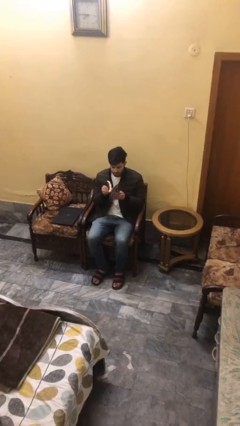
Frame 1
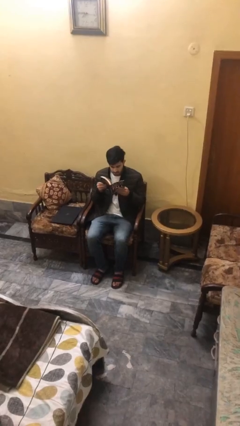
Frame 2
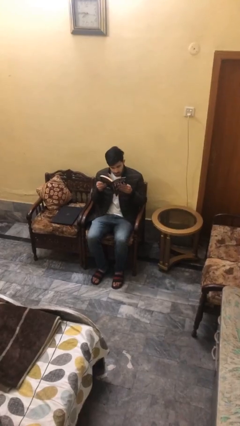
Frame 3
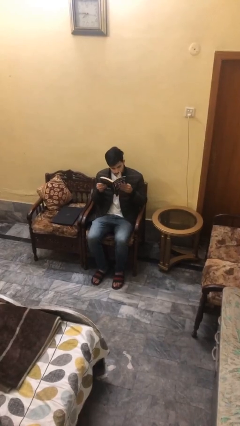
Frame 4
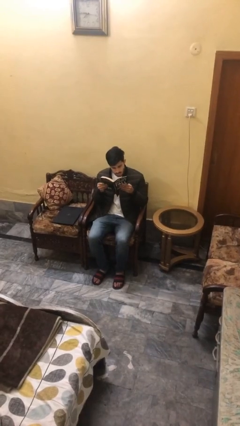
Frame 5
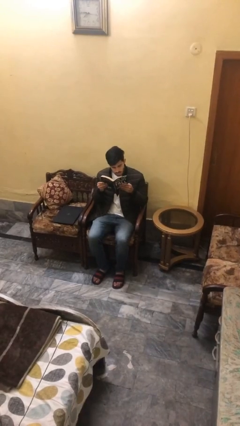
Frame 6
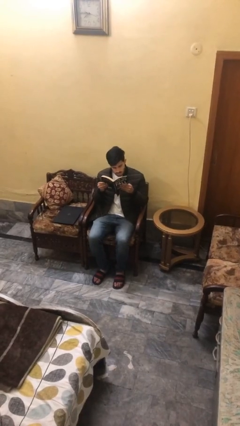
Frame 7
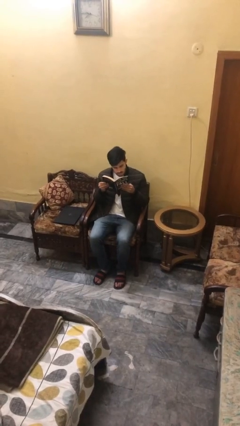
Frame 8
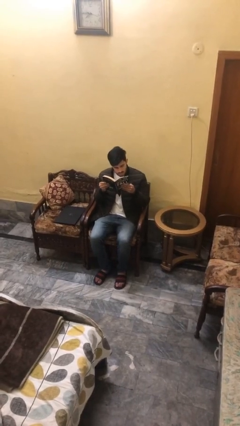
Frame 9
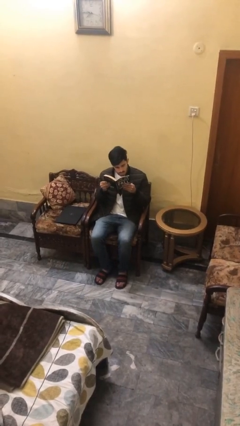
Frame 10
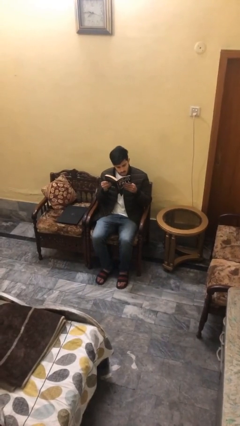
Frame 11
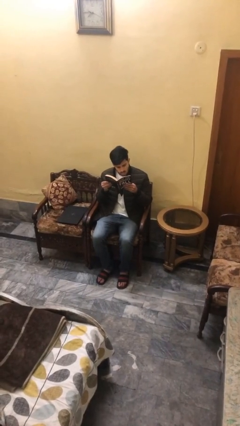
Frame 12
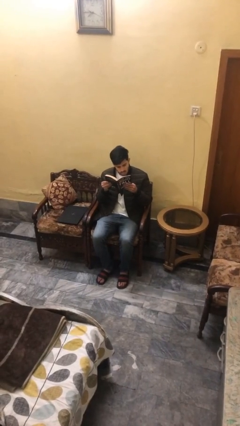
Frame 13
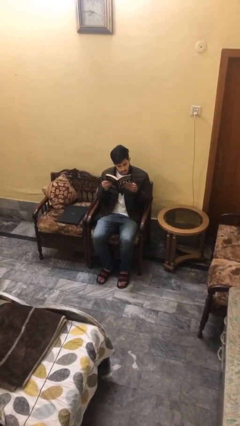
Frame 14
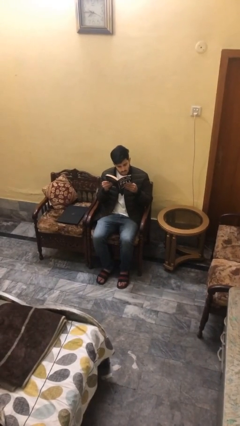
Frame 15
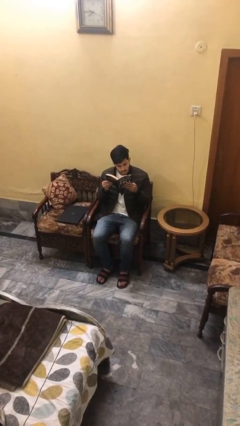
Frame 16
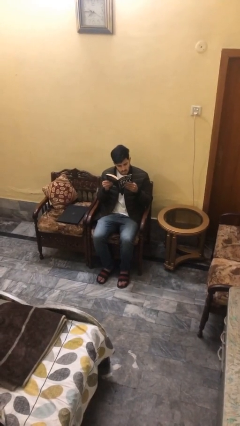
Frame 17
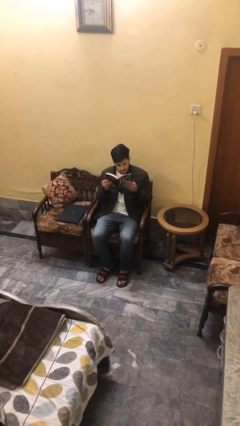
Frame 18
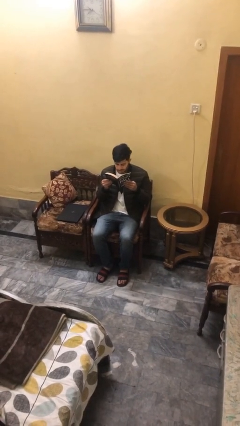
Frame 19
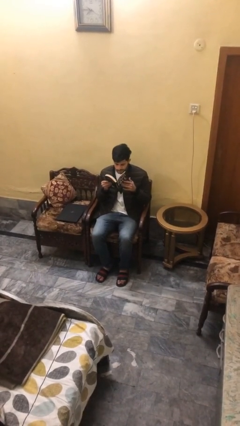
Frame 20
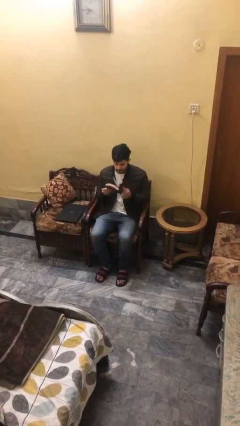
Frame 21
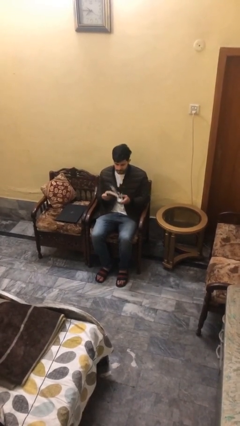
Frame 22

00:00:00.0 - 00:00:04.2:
person reads document

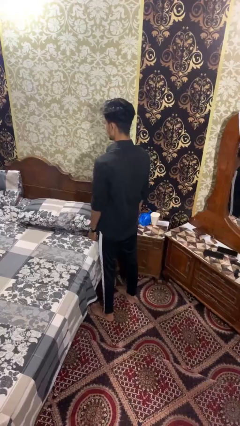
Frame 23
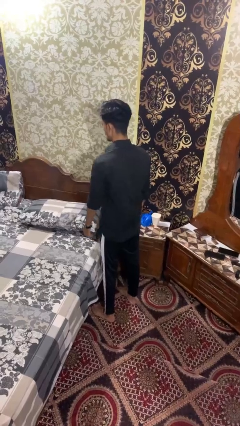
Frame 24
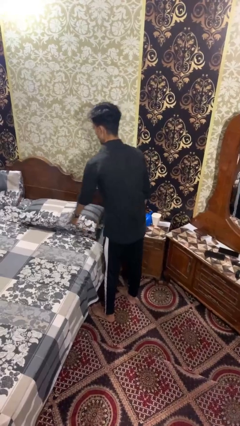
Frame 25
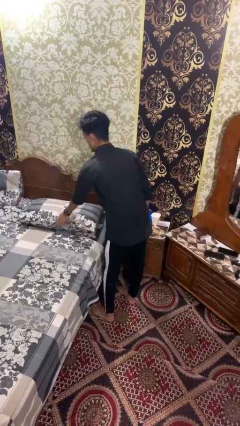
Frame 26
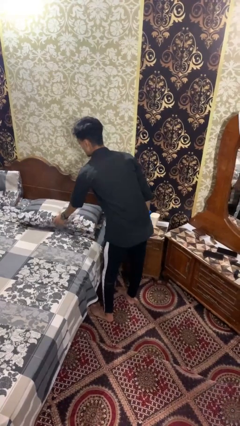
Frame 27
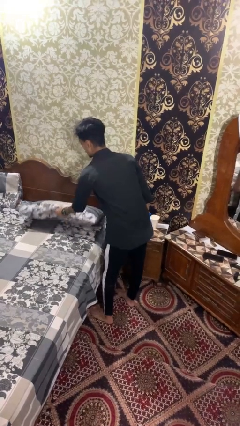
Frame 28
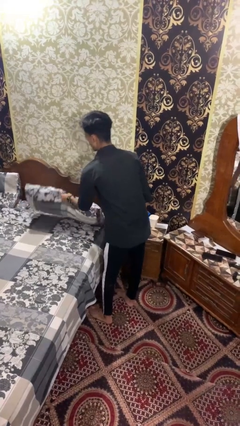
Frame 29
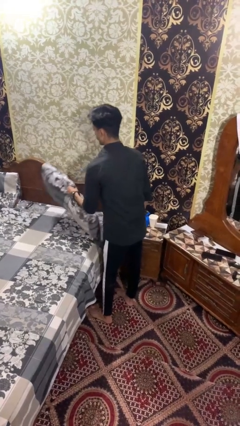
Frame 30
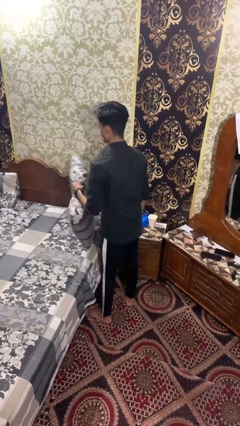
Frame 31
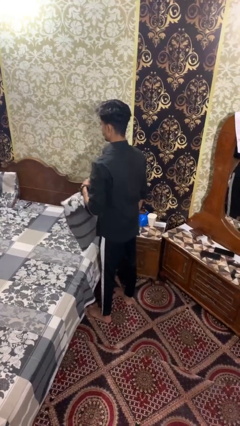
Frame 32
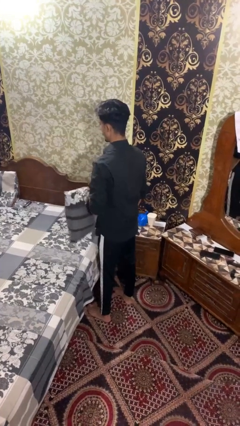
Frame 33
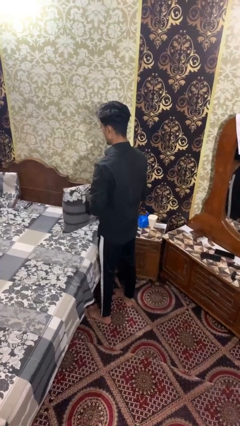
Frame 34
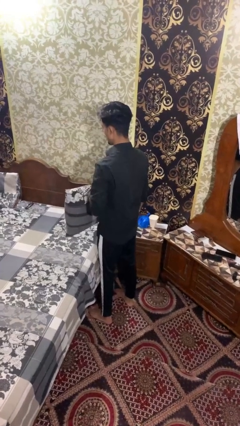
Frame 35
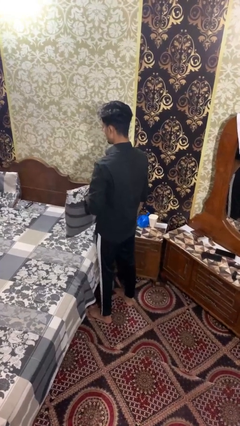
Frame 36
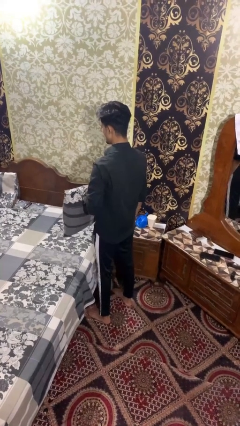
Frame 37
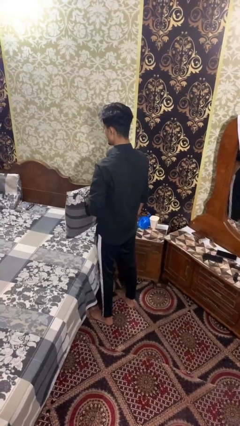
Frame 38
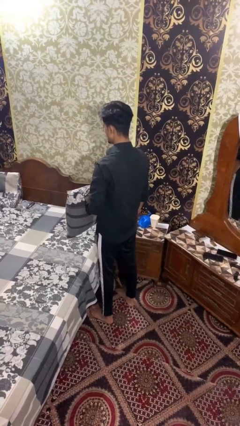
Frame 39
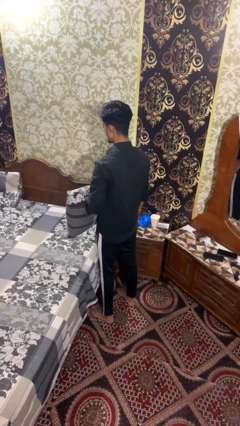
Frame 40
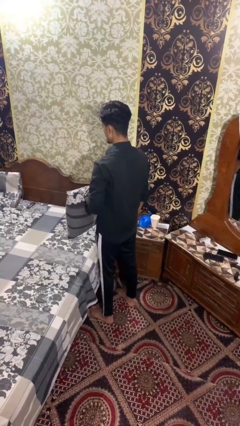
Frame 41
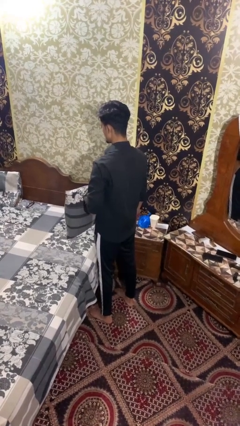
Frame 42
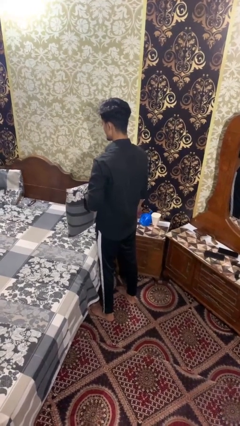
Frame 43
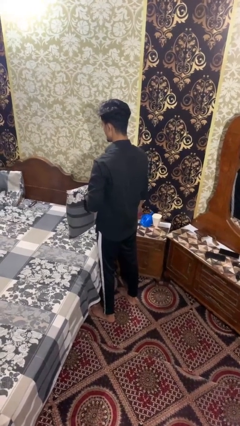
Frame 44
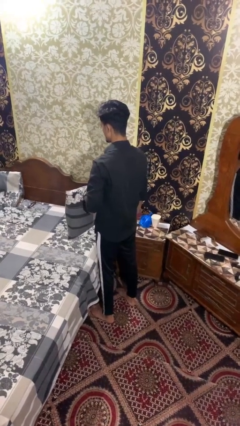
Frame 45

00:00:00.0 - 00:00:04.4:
person picks up object from bed

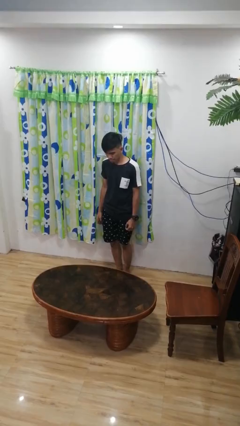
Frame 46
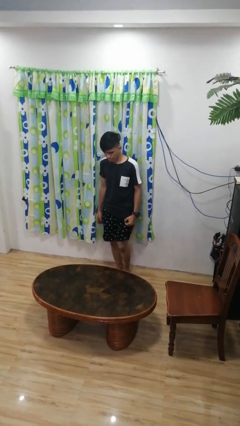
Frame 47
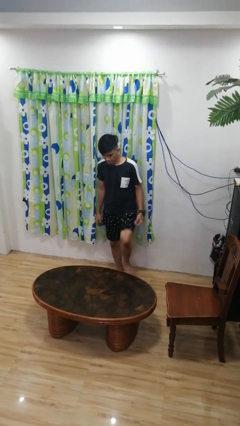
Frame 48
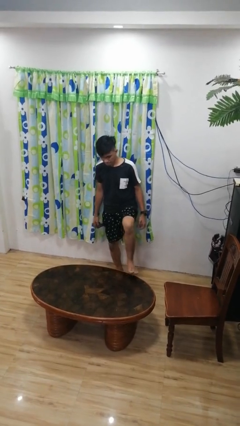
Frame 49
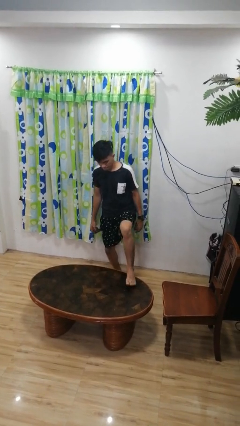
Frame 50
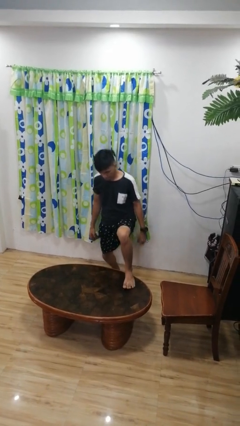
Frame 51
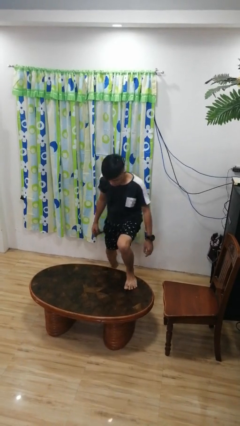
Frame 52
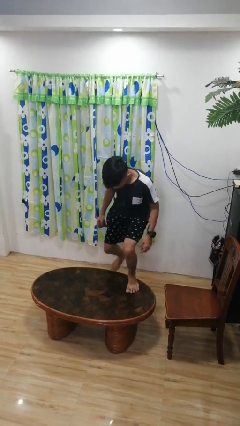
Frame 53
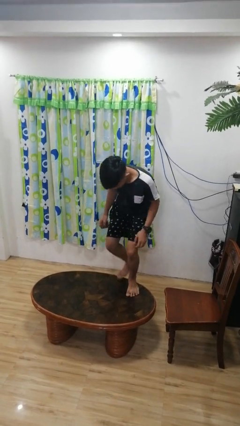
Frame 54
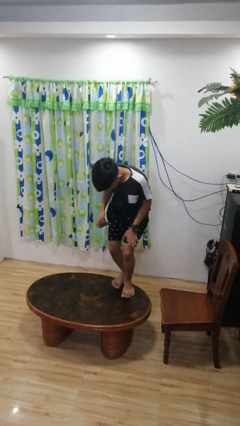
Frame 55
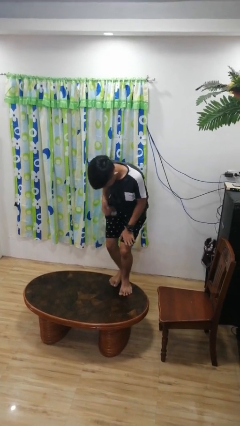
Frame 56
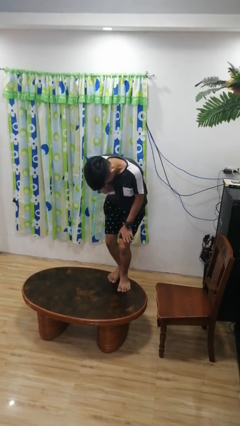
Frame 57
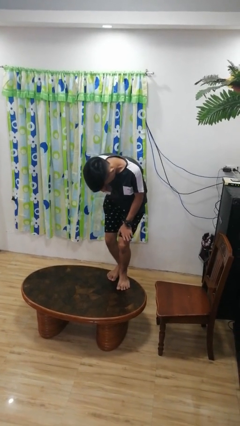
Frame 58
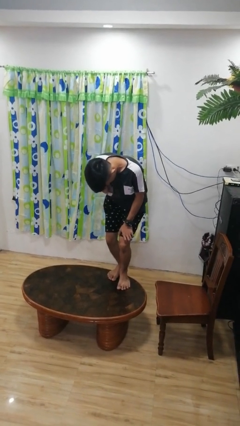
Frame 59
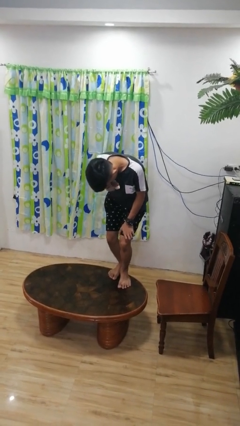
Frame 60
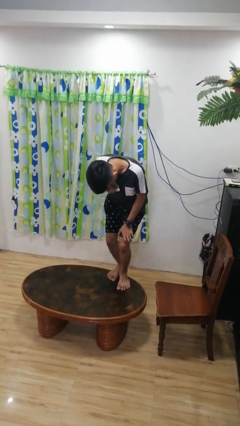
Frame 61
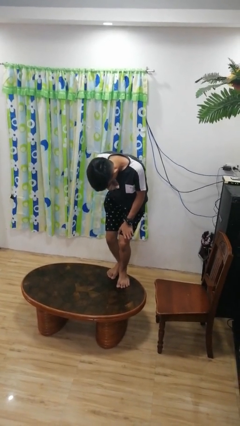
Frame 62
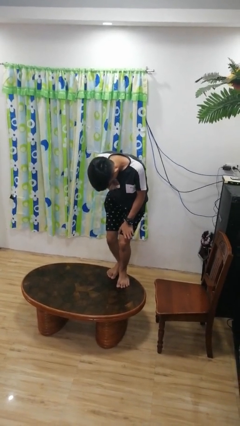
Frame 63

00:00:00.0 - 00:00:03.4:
person climbs on table

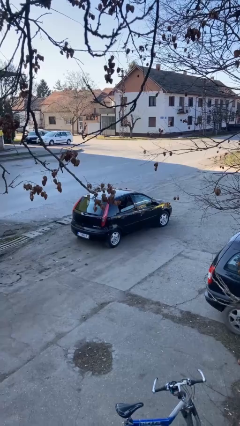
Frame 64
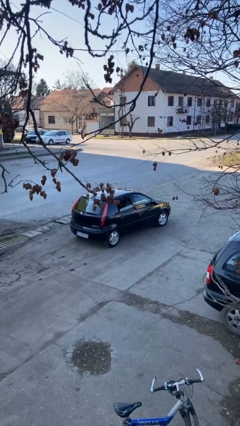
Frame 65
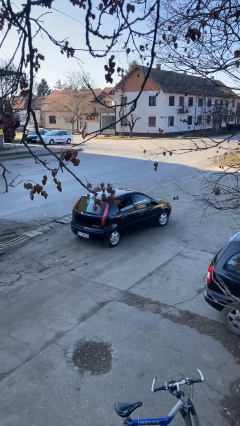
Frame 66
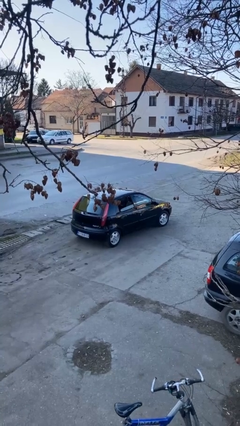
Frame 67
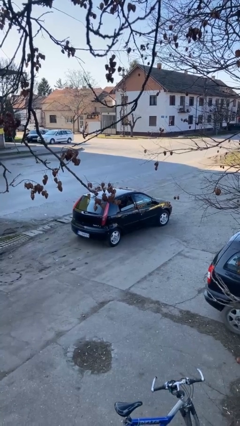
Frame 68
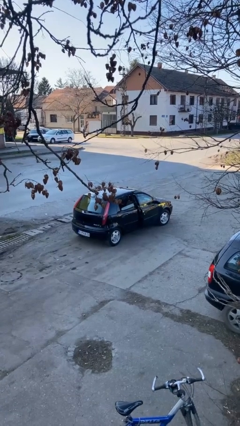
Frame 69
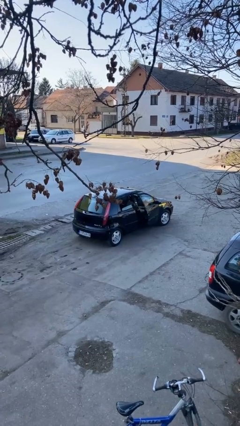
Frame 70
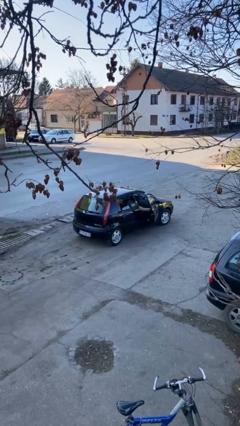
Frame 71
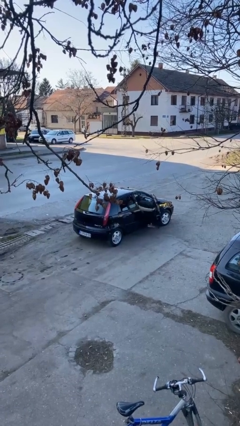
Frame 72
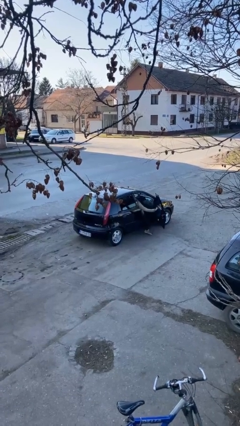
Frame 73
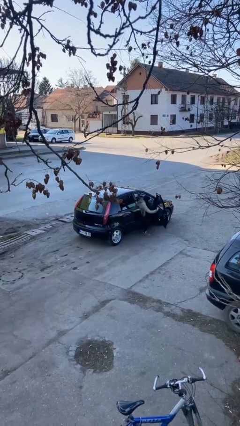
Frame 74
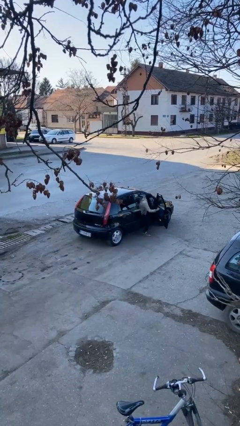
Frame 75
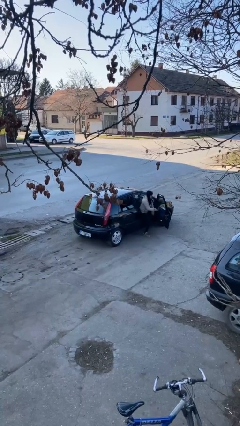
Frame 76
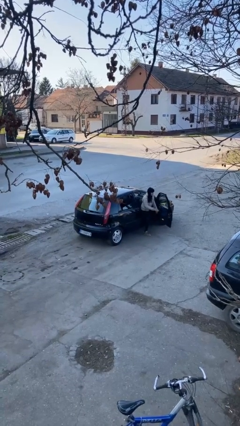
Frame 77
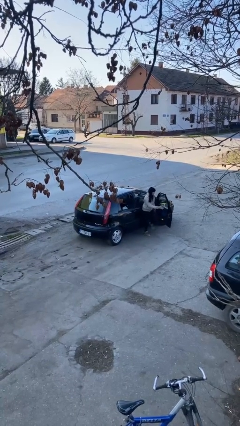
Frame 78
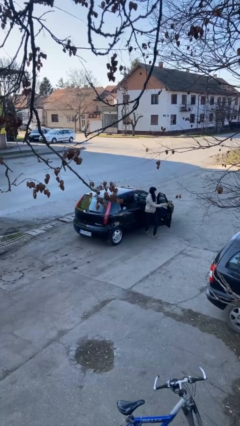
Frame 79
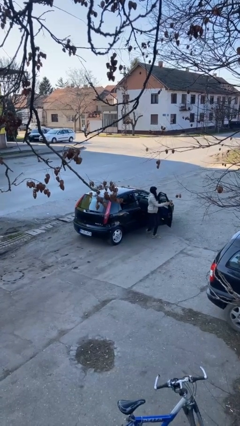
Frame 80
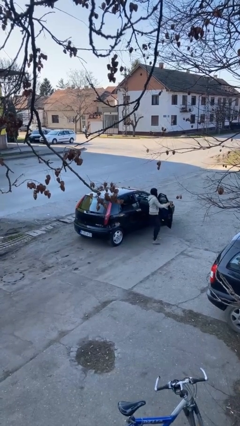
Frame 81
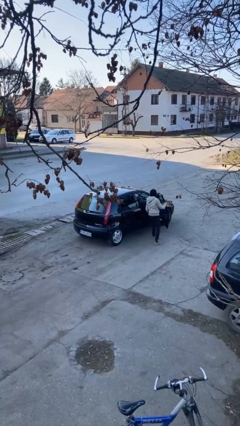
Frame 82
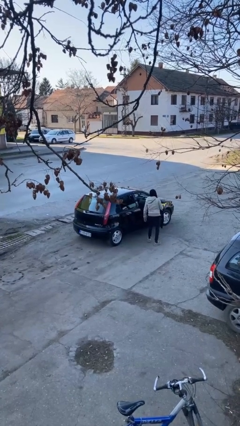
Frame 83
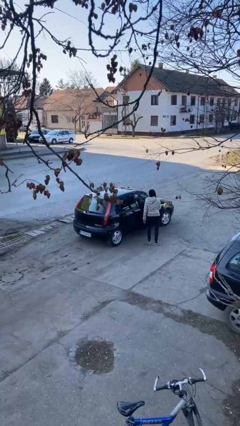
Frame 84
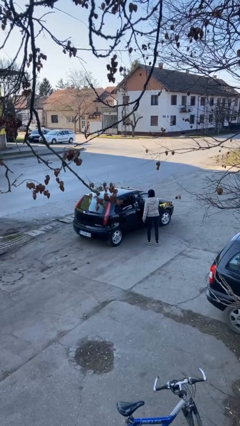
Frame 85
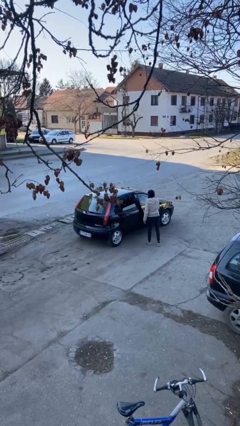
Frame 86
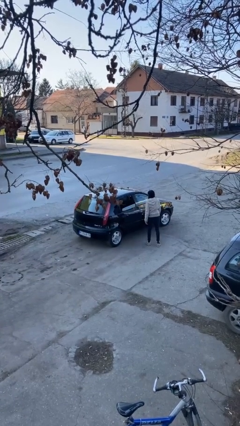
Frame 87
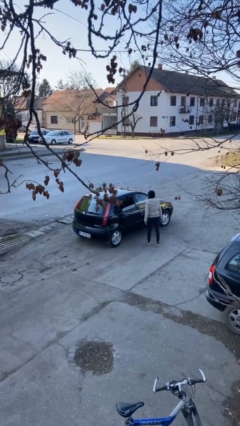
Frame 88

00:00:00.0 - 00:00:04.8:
car drops off person

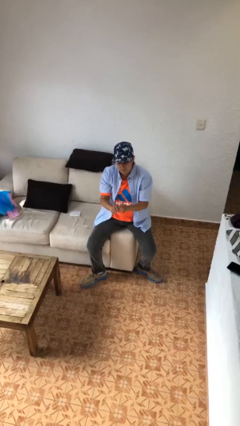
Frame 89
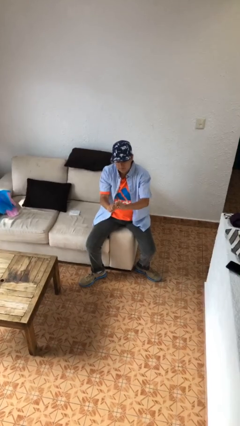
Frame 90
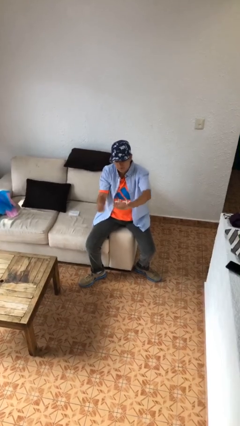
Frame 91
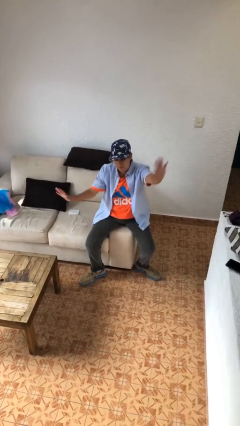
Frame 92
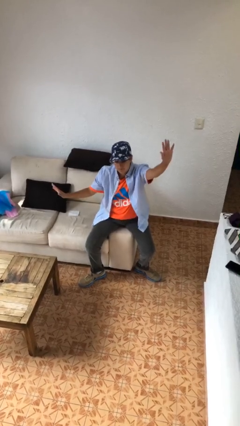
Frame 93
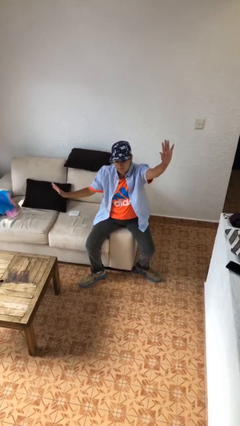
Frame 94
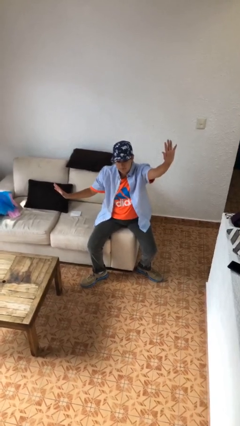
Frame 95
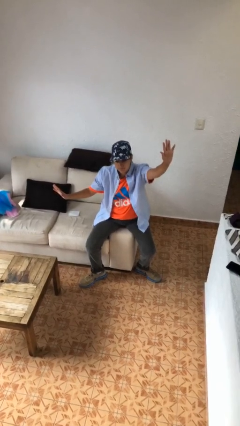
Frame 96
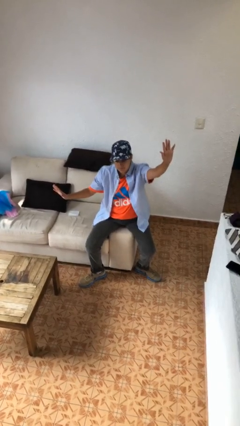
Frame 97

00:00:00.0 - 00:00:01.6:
person gestures zoom in
